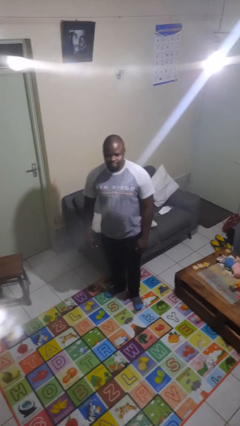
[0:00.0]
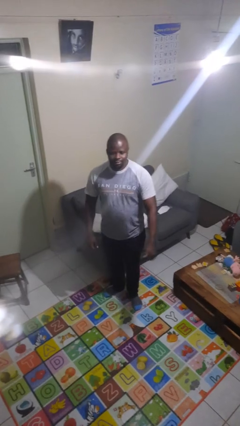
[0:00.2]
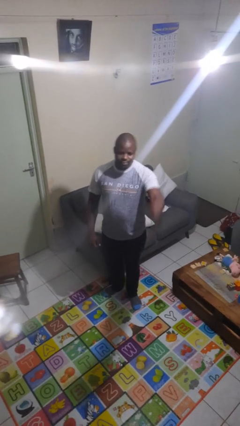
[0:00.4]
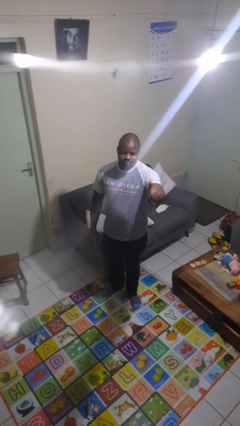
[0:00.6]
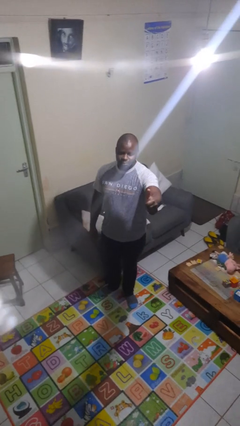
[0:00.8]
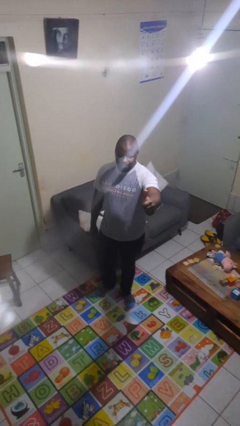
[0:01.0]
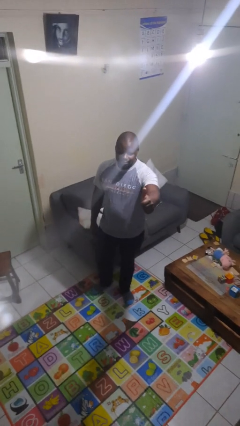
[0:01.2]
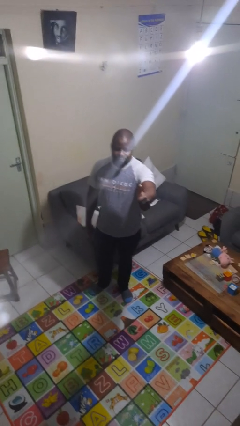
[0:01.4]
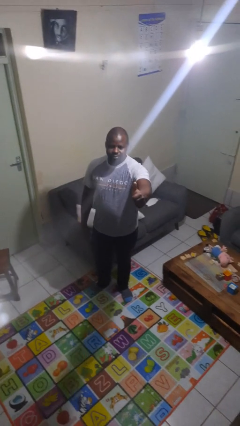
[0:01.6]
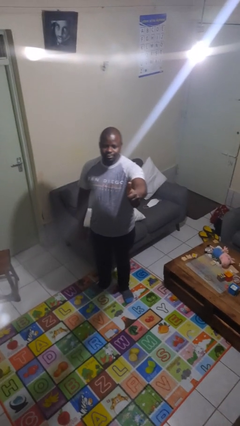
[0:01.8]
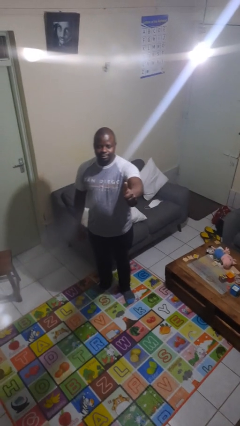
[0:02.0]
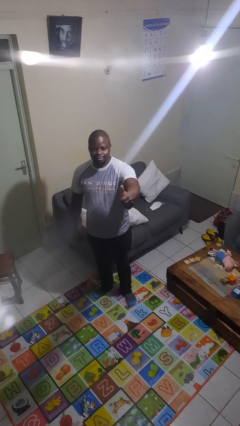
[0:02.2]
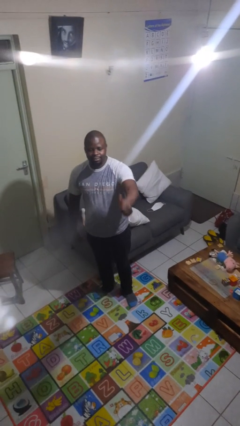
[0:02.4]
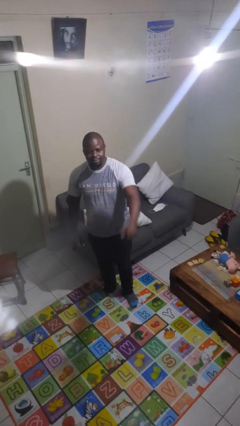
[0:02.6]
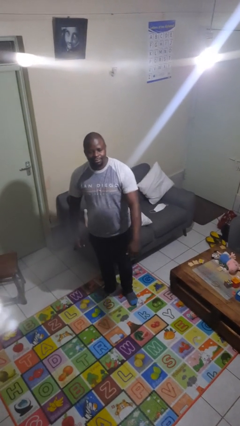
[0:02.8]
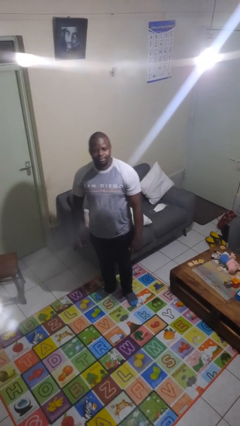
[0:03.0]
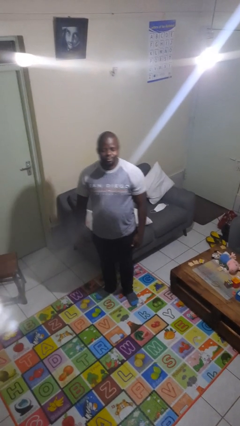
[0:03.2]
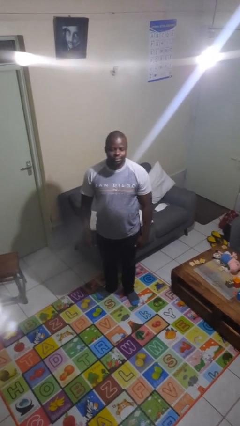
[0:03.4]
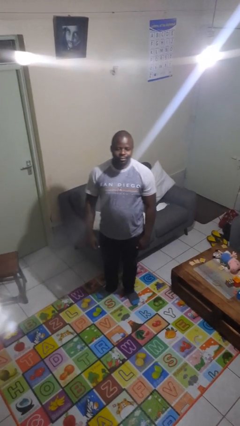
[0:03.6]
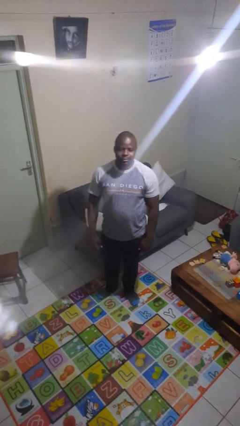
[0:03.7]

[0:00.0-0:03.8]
person gestures thumbs up

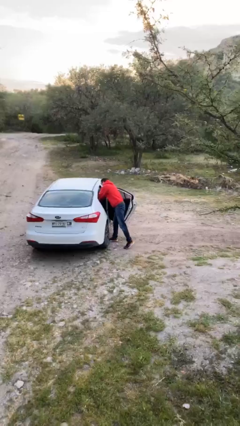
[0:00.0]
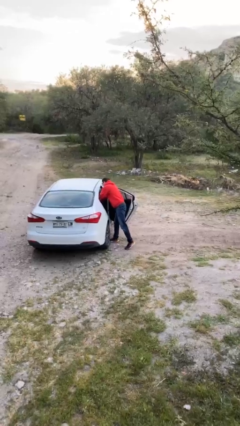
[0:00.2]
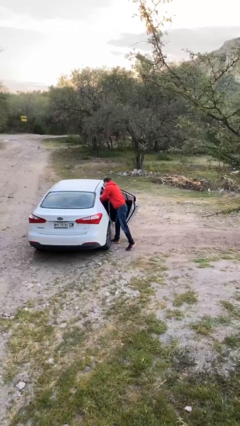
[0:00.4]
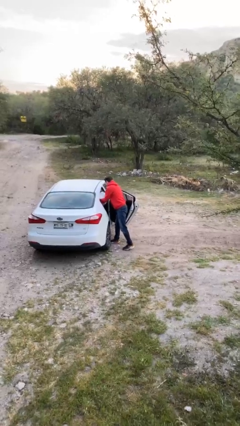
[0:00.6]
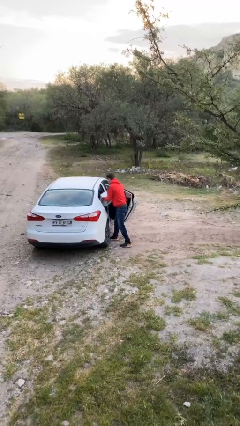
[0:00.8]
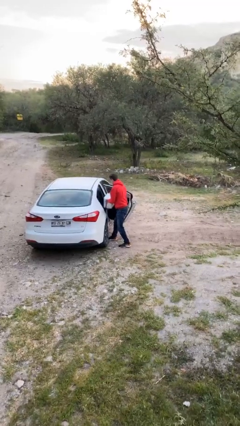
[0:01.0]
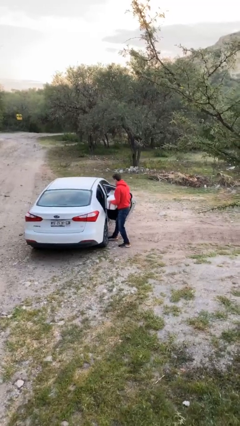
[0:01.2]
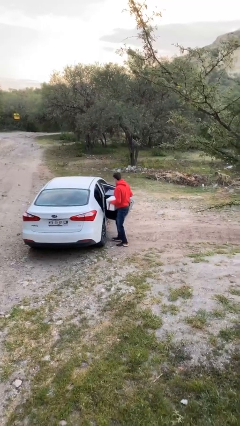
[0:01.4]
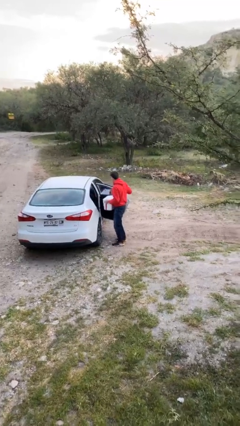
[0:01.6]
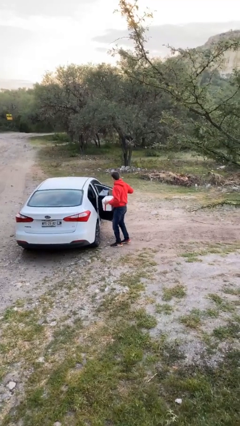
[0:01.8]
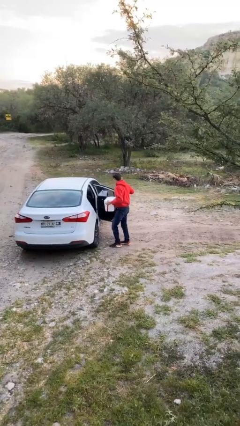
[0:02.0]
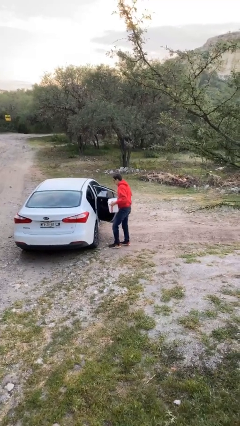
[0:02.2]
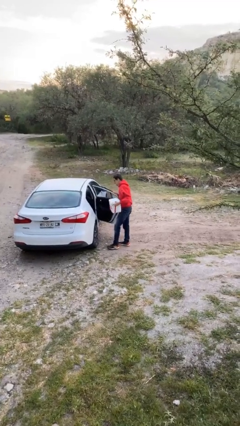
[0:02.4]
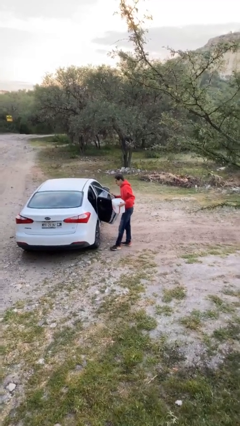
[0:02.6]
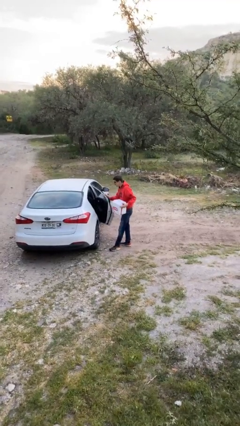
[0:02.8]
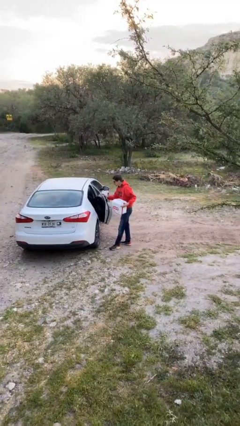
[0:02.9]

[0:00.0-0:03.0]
person unloads car

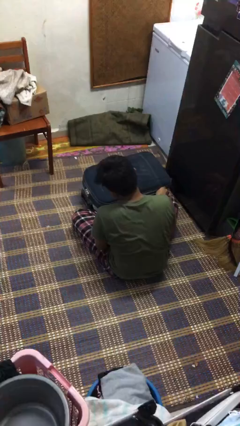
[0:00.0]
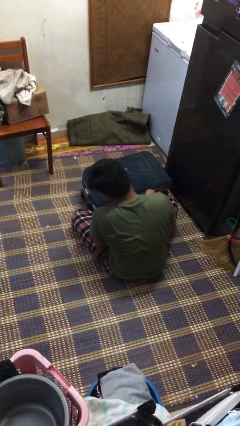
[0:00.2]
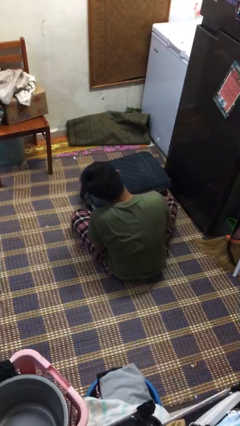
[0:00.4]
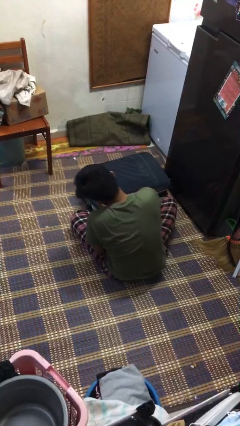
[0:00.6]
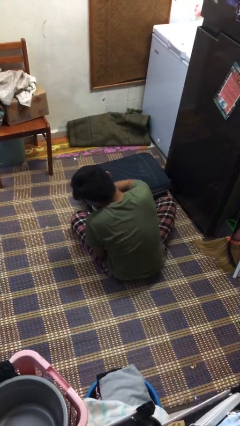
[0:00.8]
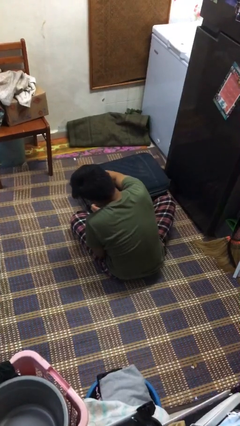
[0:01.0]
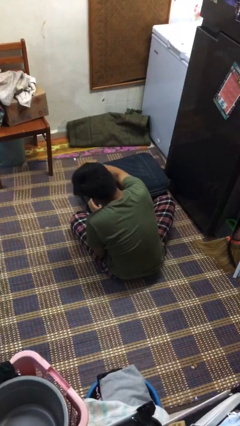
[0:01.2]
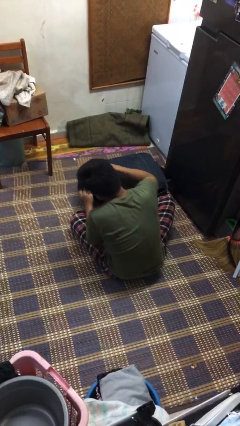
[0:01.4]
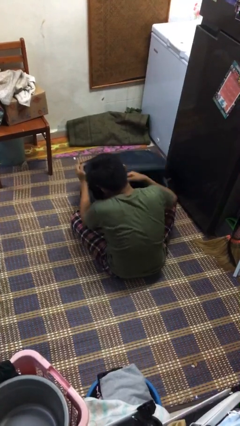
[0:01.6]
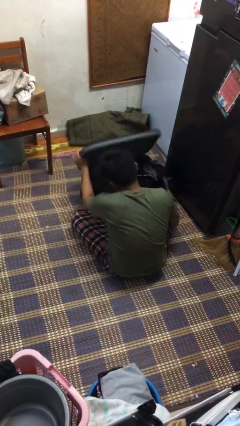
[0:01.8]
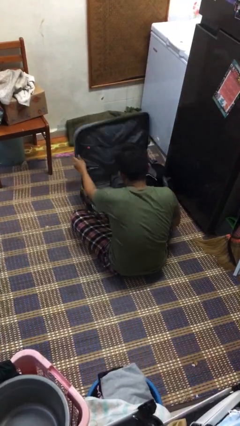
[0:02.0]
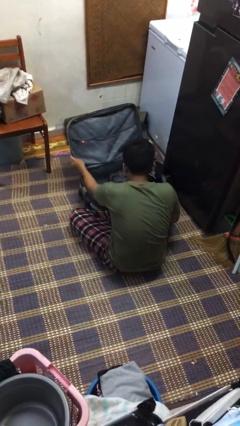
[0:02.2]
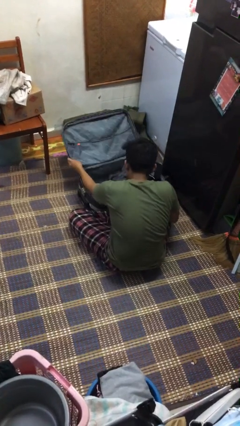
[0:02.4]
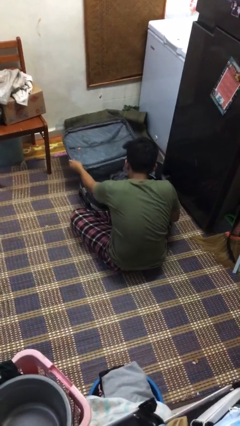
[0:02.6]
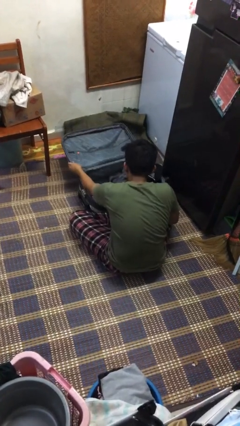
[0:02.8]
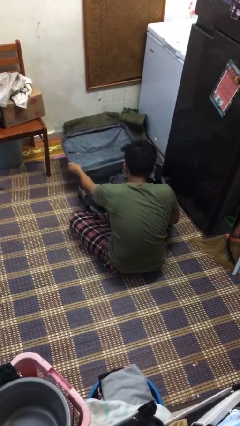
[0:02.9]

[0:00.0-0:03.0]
person opens suitcase

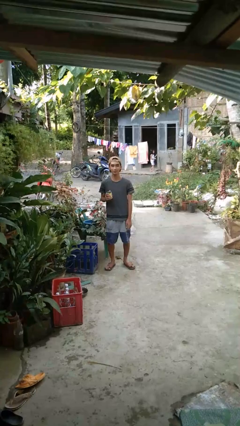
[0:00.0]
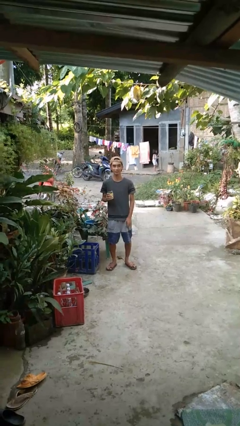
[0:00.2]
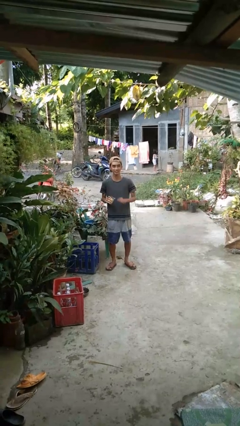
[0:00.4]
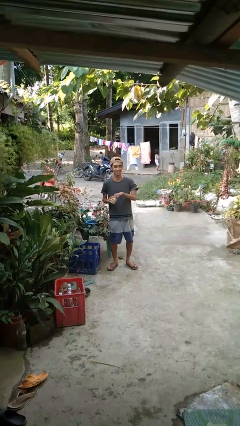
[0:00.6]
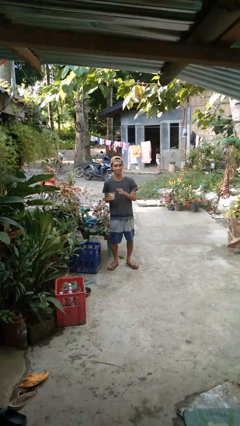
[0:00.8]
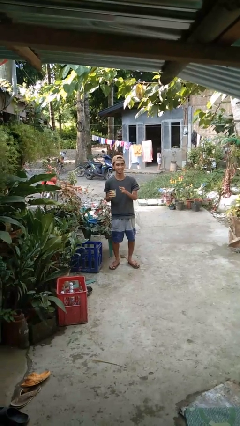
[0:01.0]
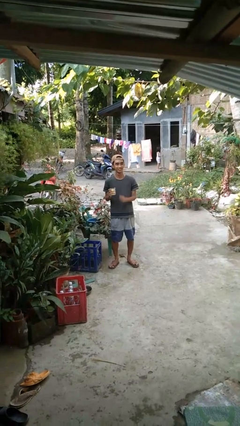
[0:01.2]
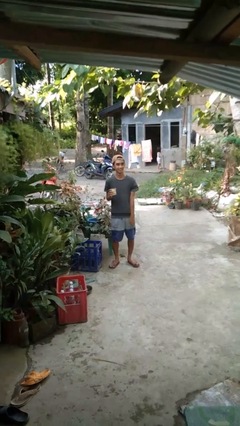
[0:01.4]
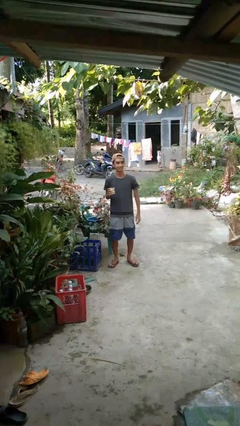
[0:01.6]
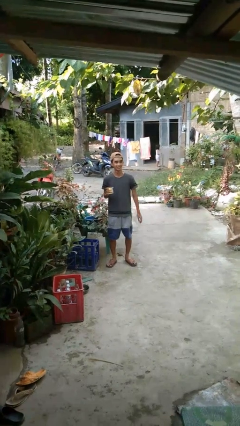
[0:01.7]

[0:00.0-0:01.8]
person opens beverage can

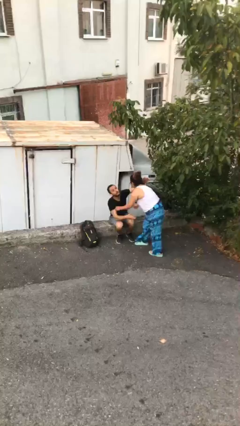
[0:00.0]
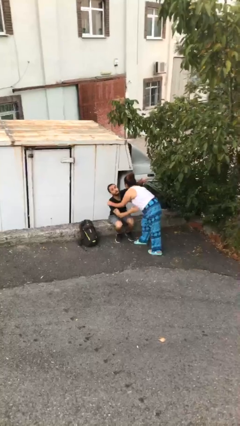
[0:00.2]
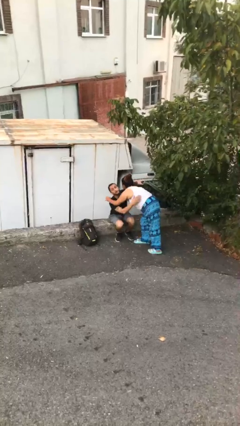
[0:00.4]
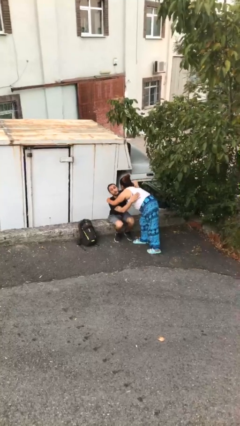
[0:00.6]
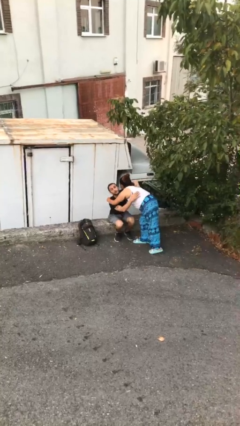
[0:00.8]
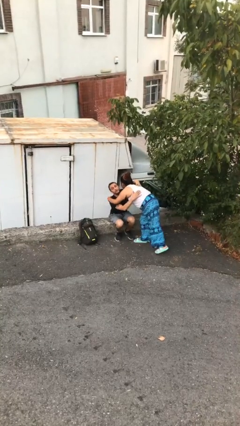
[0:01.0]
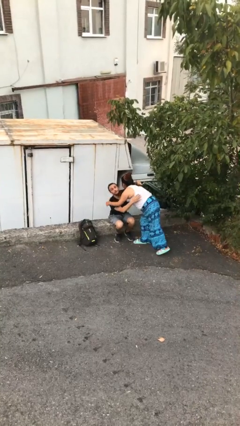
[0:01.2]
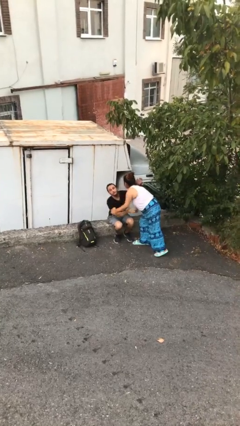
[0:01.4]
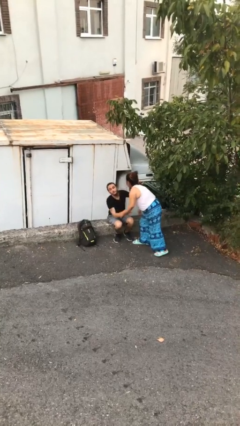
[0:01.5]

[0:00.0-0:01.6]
person embraces person

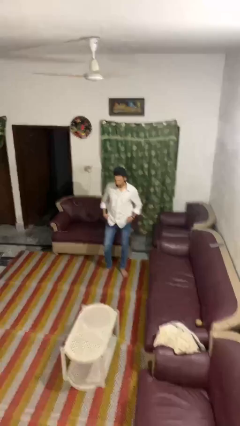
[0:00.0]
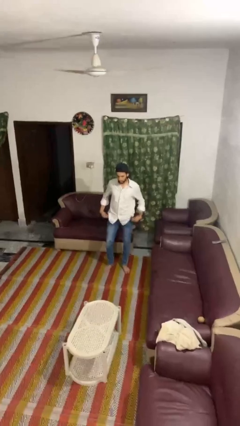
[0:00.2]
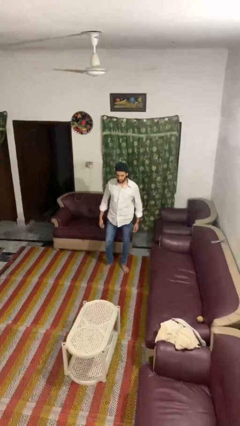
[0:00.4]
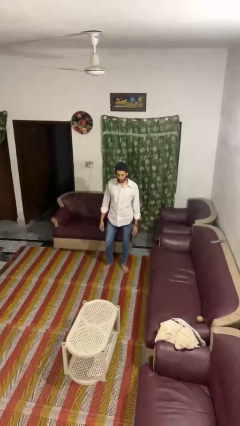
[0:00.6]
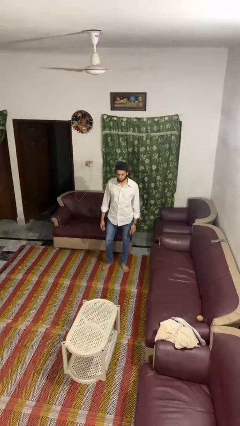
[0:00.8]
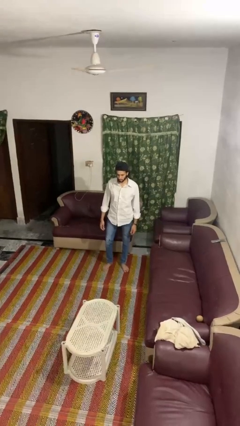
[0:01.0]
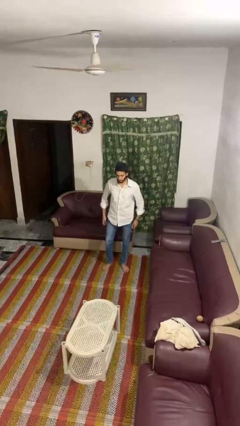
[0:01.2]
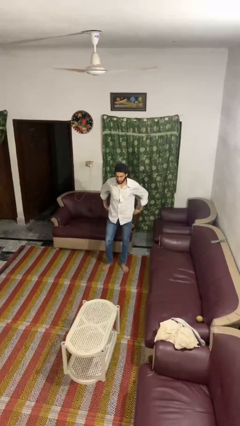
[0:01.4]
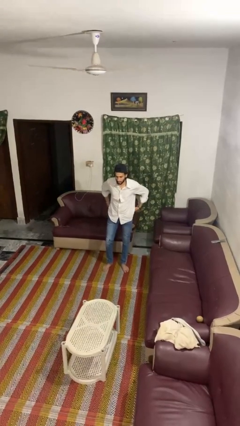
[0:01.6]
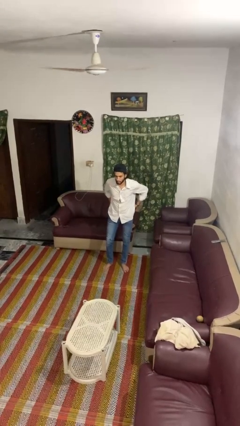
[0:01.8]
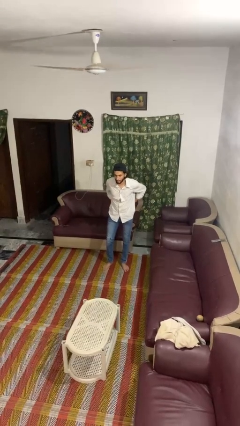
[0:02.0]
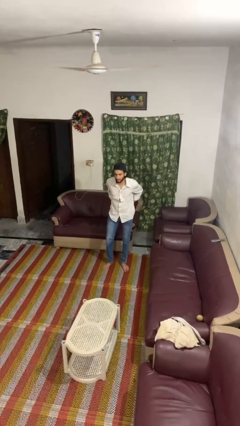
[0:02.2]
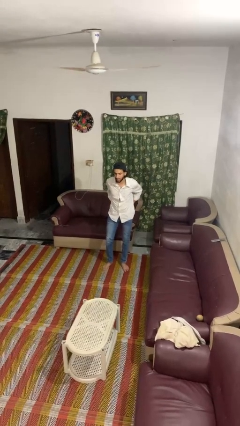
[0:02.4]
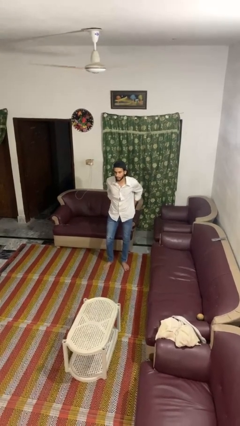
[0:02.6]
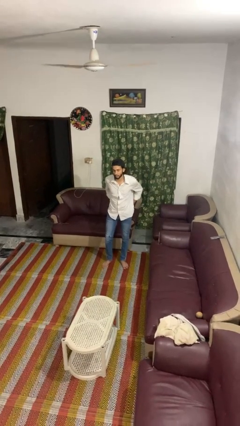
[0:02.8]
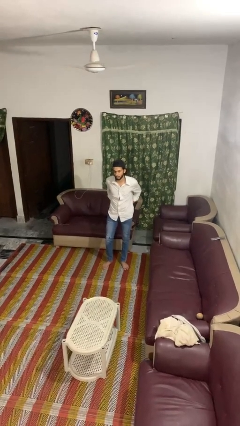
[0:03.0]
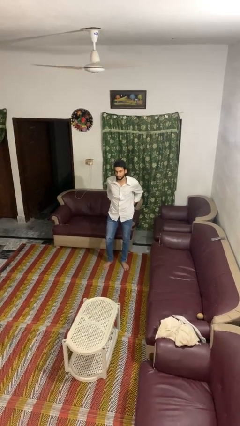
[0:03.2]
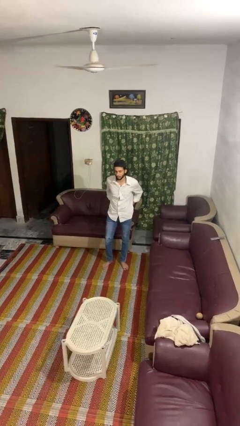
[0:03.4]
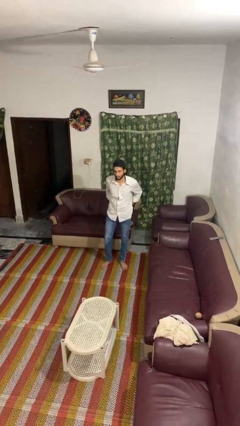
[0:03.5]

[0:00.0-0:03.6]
person puts hands in back pockets

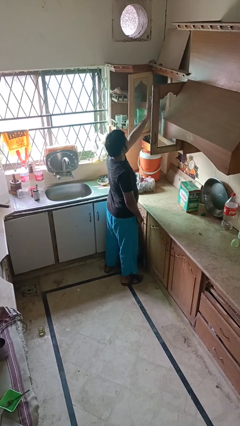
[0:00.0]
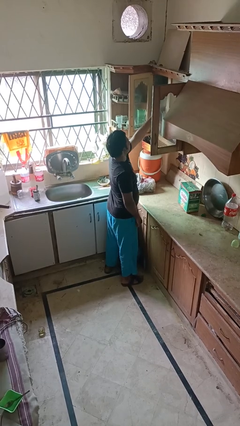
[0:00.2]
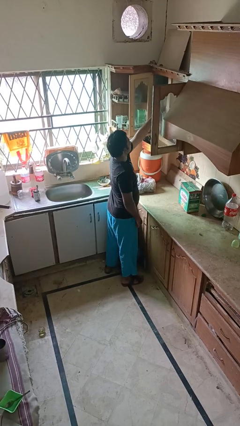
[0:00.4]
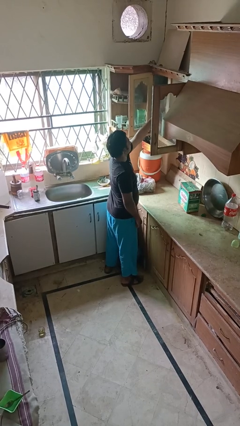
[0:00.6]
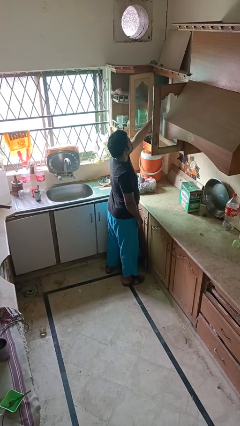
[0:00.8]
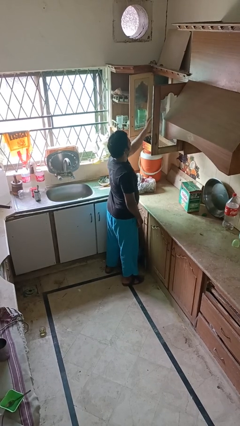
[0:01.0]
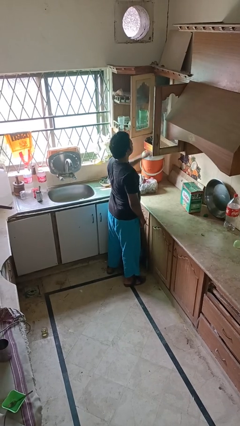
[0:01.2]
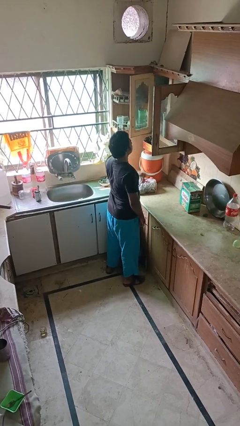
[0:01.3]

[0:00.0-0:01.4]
person puts down object into cabinet
